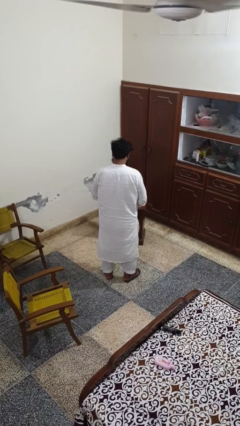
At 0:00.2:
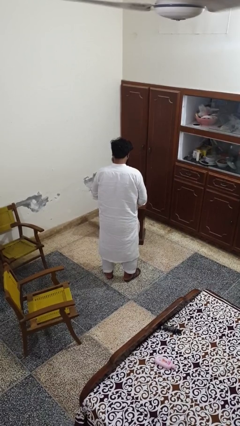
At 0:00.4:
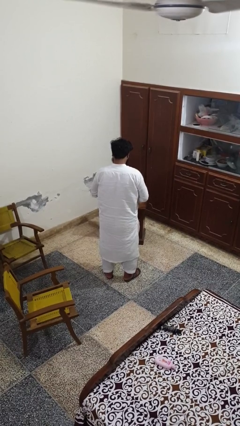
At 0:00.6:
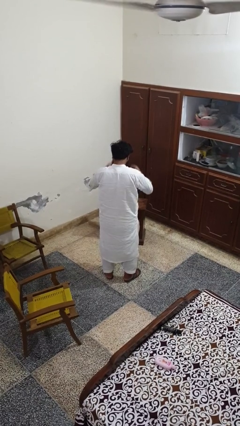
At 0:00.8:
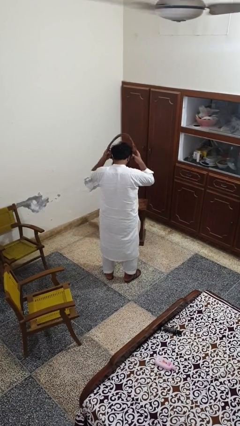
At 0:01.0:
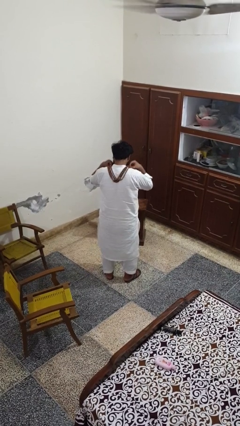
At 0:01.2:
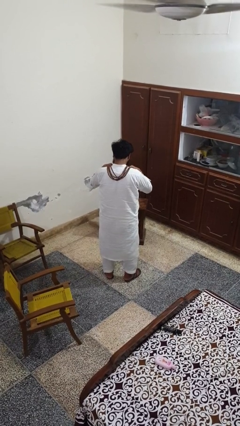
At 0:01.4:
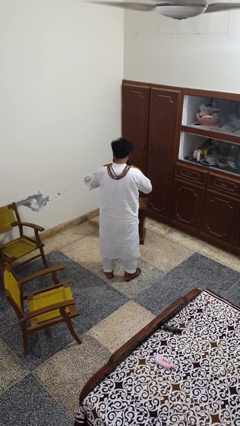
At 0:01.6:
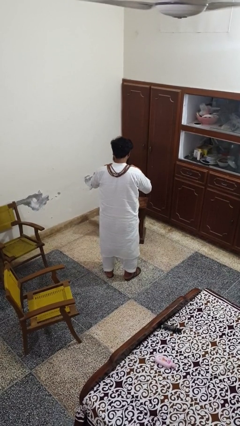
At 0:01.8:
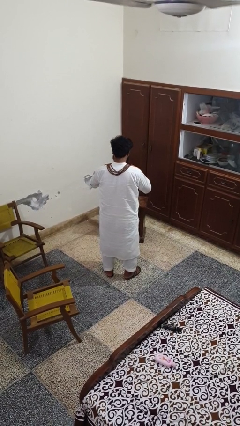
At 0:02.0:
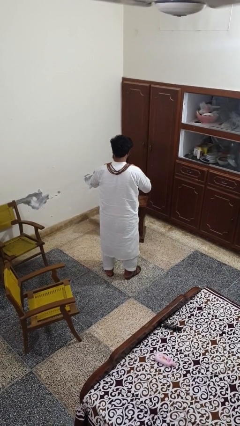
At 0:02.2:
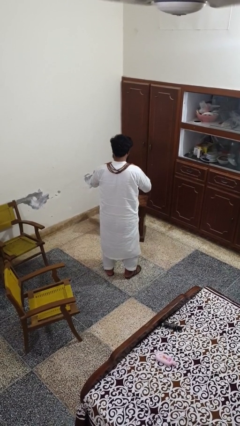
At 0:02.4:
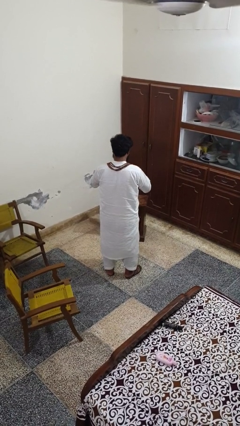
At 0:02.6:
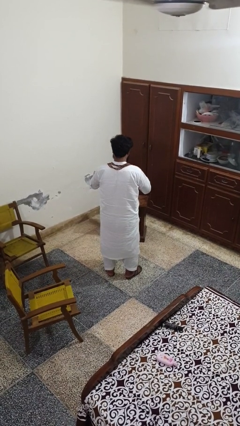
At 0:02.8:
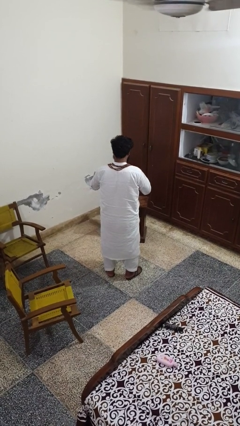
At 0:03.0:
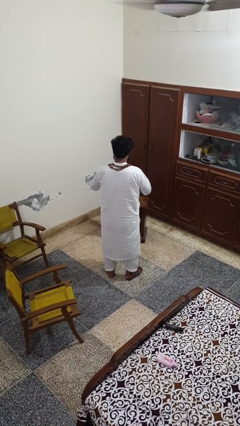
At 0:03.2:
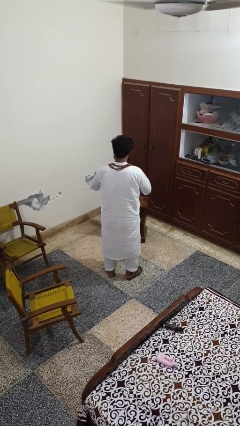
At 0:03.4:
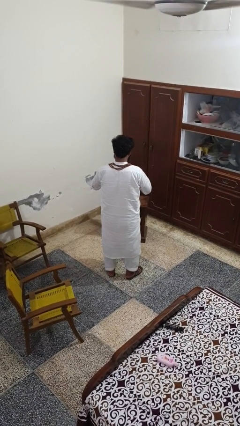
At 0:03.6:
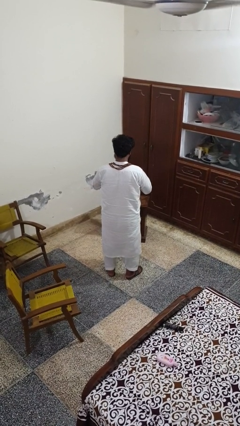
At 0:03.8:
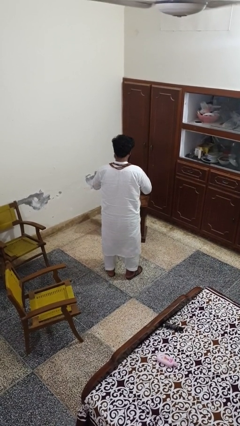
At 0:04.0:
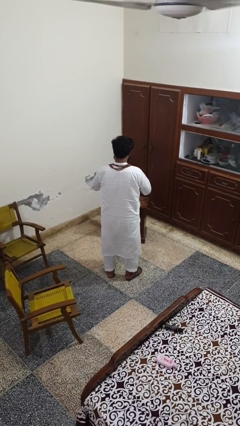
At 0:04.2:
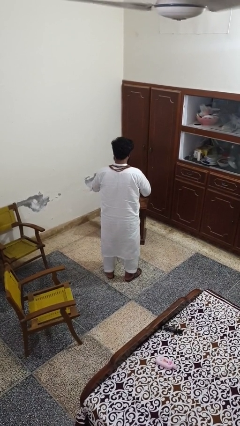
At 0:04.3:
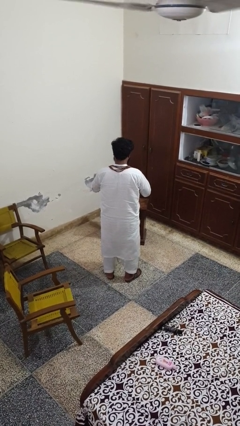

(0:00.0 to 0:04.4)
person puts on necklace

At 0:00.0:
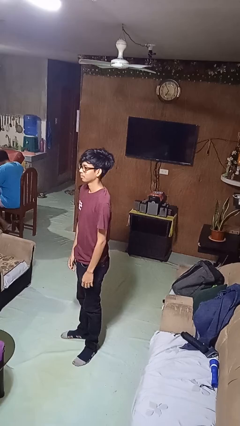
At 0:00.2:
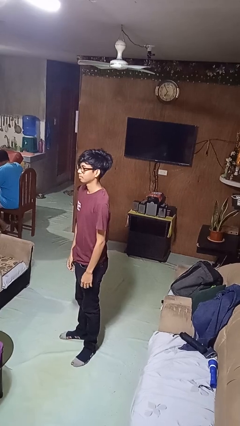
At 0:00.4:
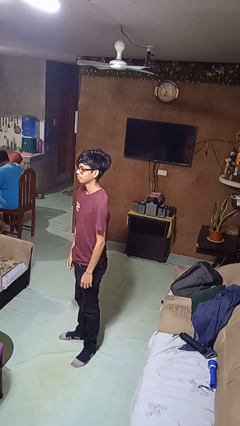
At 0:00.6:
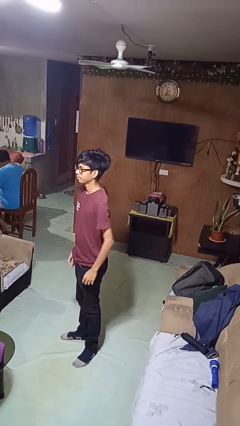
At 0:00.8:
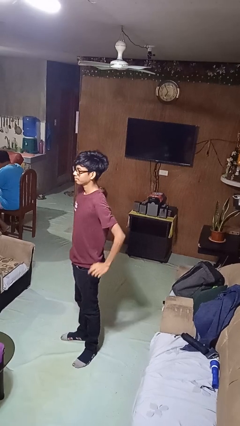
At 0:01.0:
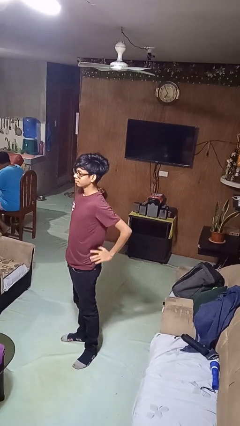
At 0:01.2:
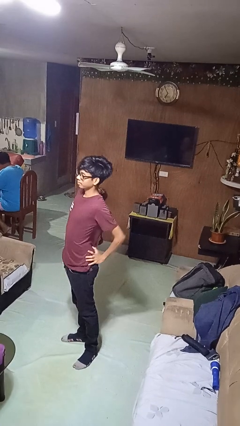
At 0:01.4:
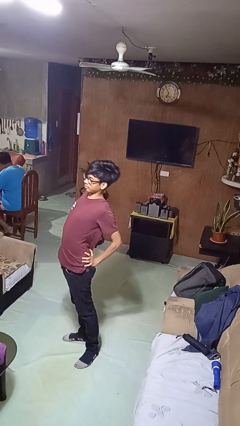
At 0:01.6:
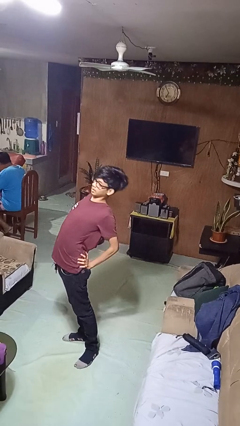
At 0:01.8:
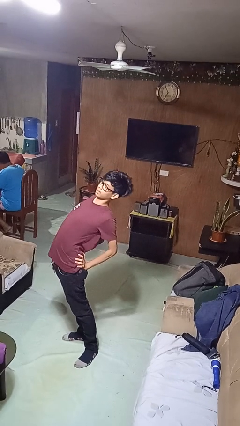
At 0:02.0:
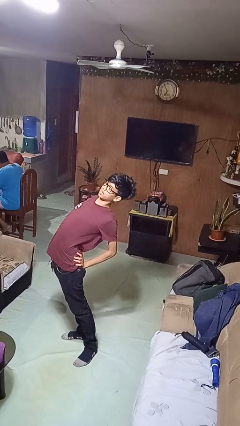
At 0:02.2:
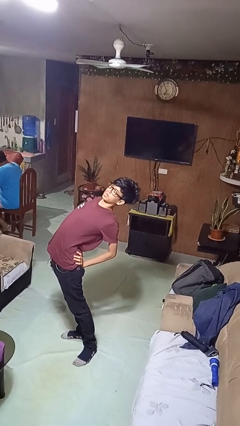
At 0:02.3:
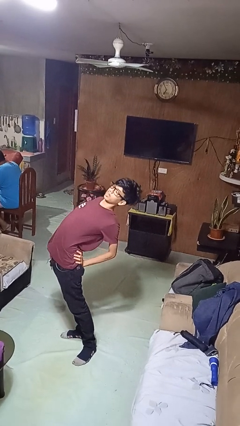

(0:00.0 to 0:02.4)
person stretches back

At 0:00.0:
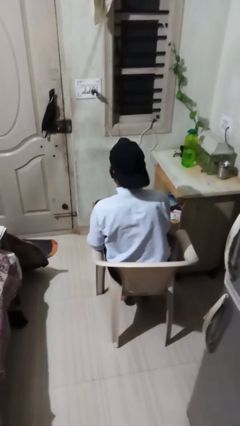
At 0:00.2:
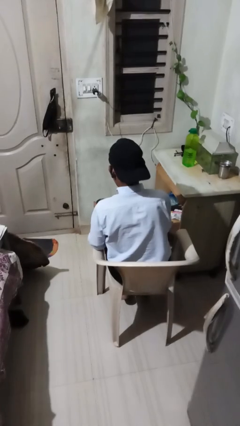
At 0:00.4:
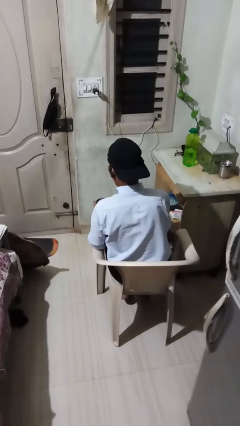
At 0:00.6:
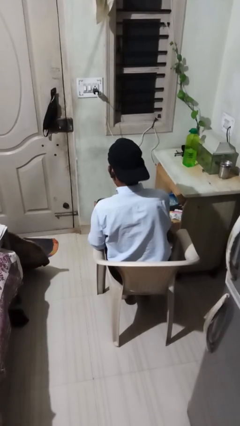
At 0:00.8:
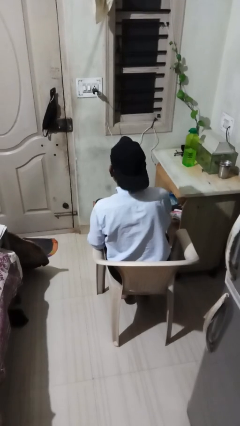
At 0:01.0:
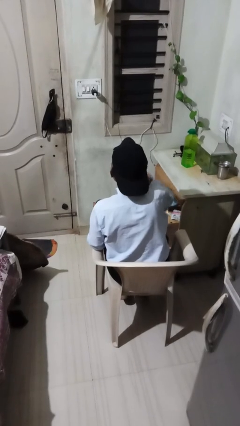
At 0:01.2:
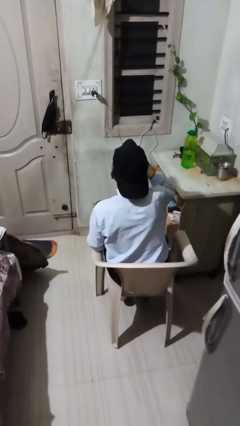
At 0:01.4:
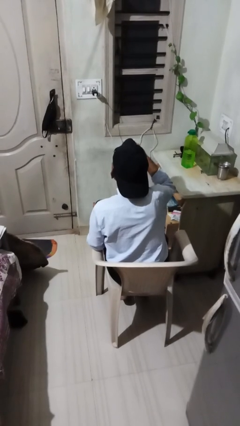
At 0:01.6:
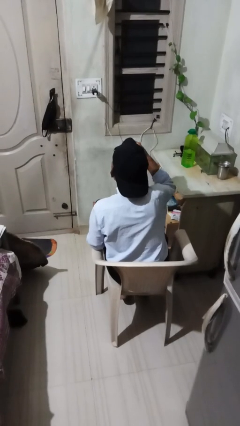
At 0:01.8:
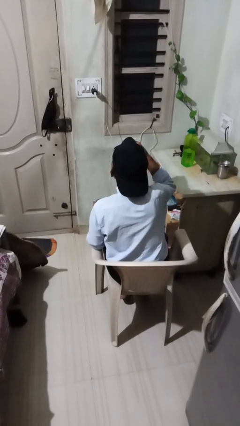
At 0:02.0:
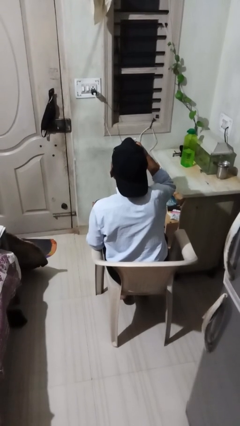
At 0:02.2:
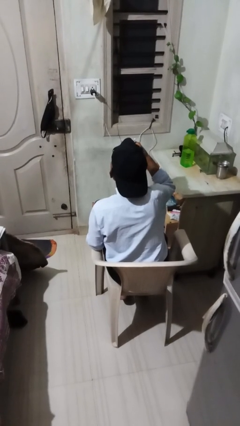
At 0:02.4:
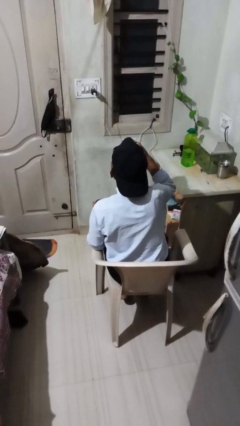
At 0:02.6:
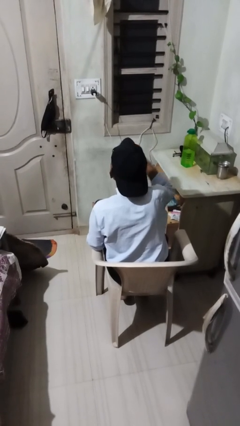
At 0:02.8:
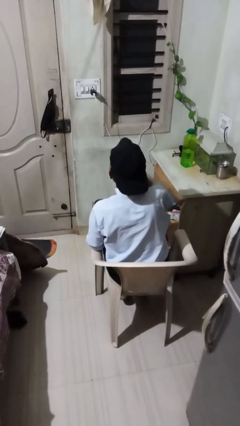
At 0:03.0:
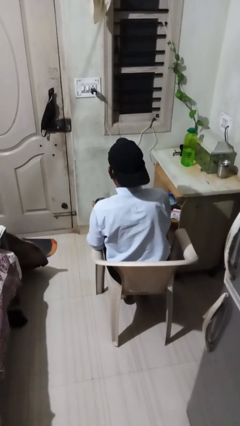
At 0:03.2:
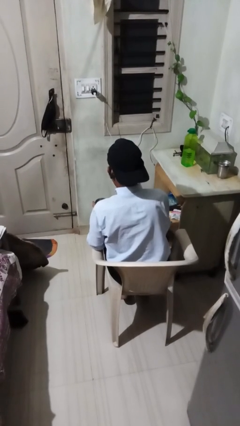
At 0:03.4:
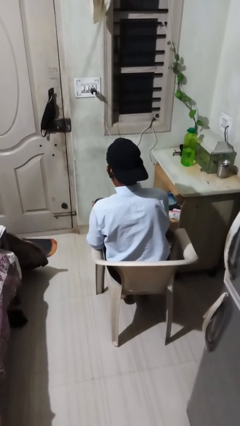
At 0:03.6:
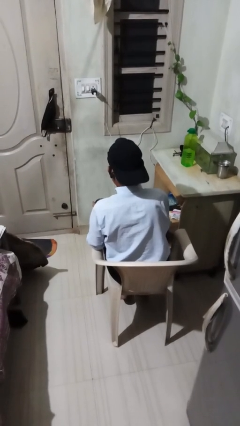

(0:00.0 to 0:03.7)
person eats with utensil

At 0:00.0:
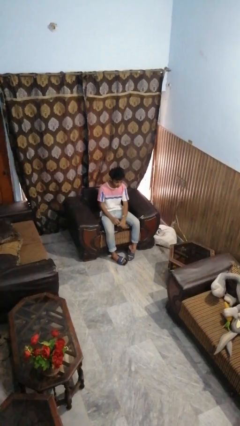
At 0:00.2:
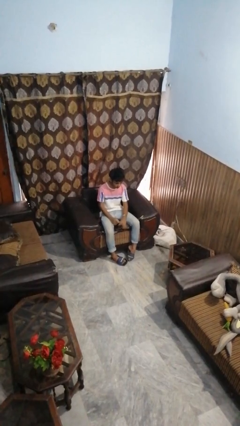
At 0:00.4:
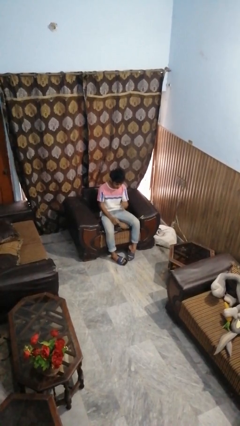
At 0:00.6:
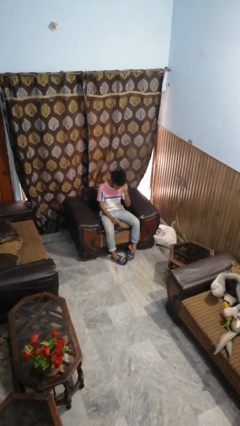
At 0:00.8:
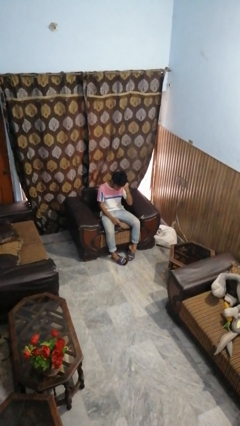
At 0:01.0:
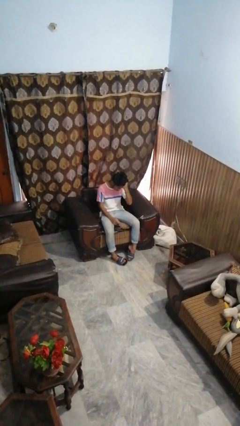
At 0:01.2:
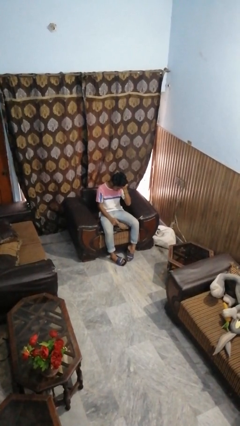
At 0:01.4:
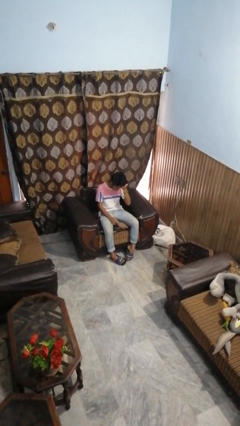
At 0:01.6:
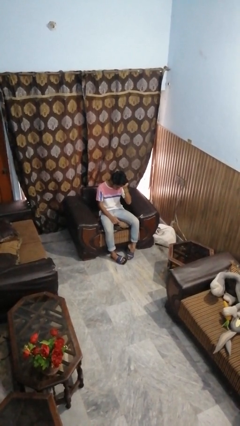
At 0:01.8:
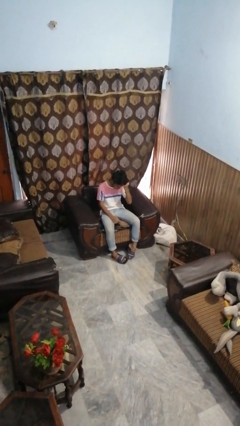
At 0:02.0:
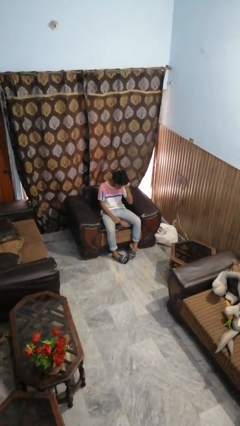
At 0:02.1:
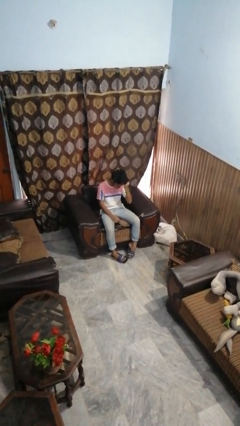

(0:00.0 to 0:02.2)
person strokes hair

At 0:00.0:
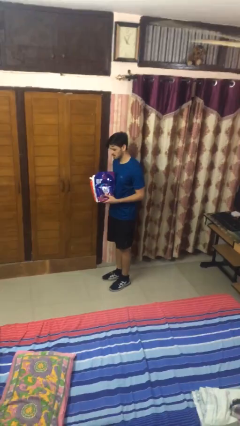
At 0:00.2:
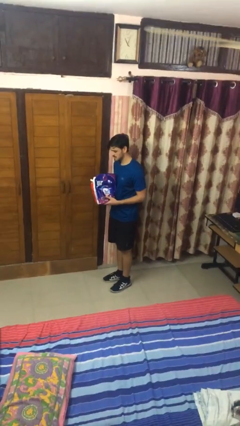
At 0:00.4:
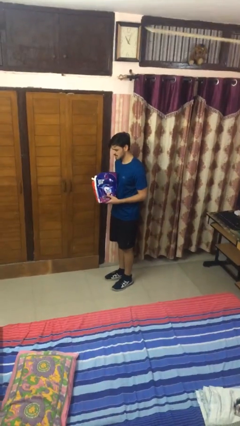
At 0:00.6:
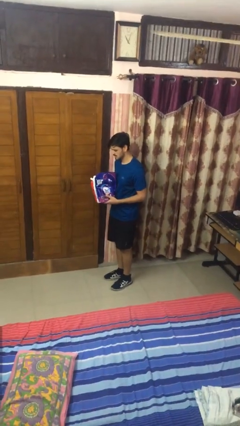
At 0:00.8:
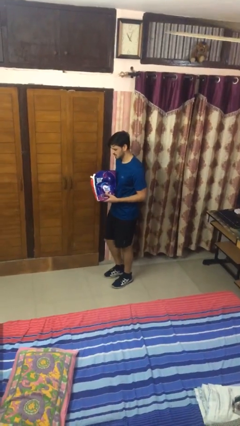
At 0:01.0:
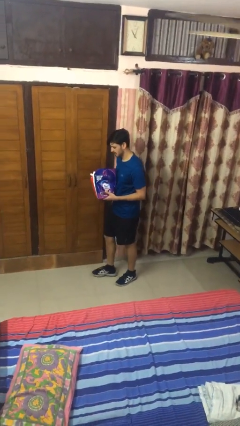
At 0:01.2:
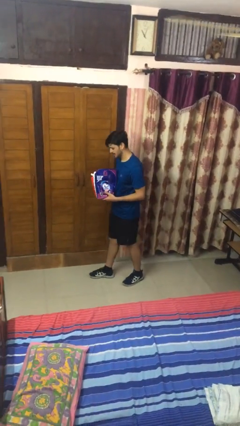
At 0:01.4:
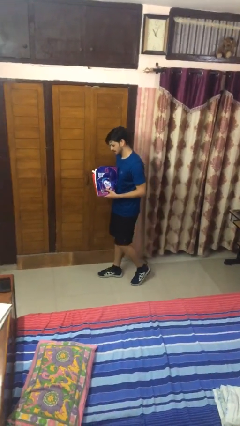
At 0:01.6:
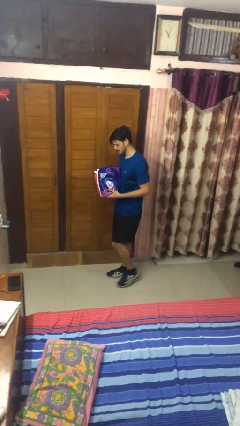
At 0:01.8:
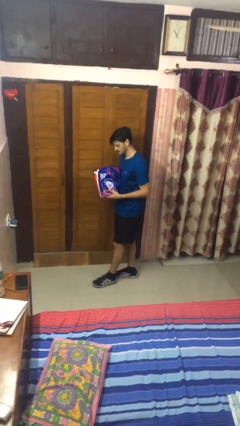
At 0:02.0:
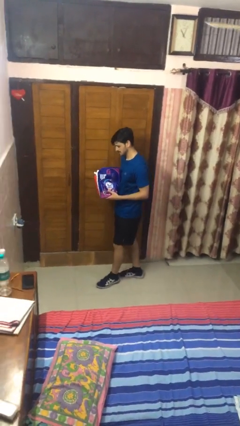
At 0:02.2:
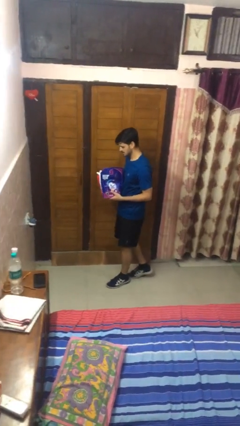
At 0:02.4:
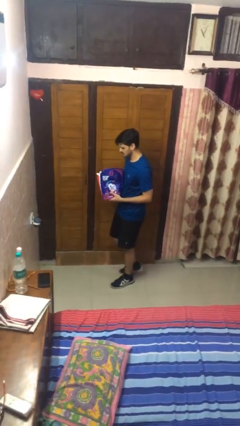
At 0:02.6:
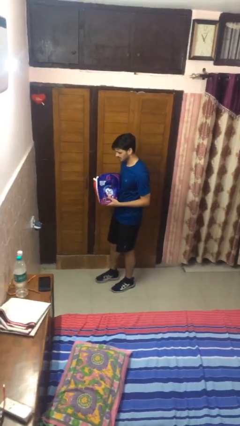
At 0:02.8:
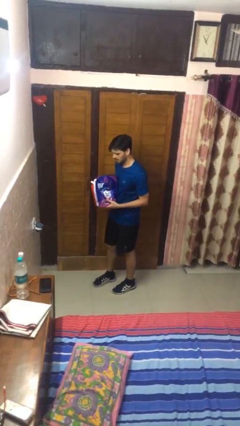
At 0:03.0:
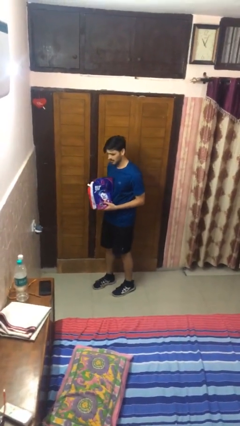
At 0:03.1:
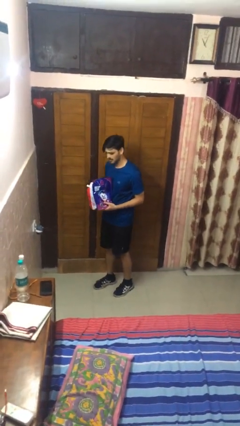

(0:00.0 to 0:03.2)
person carries groceries

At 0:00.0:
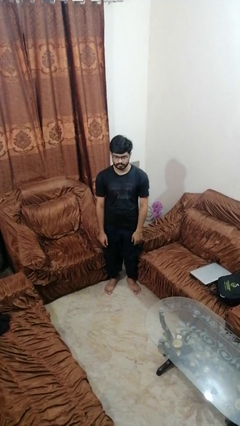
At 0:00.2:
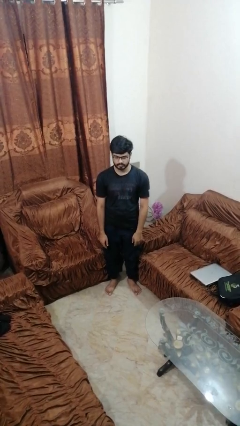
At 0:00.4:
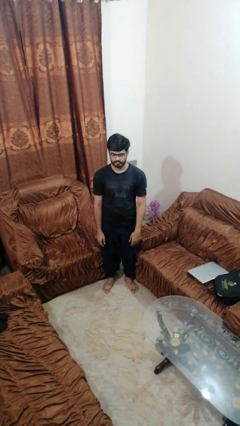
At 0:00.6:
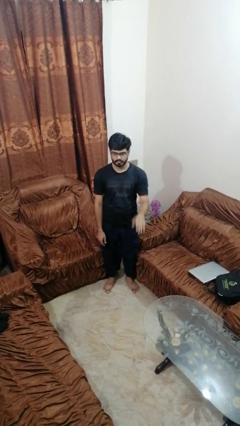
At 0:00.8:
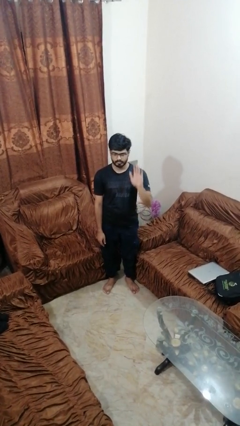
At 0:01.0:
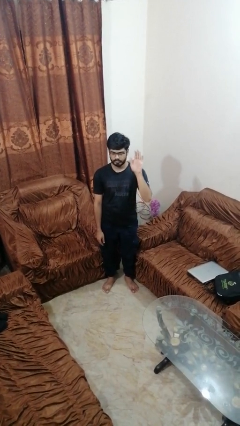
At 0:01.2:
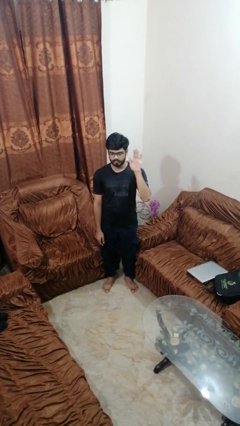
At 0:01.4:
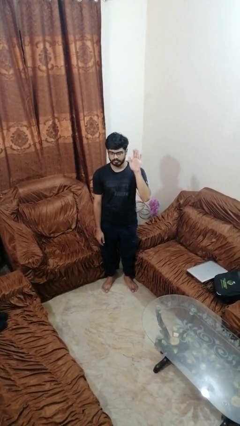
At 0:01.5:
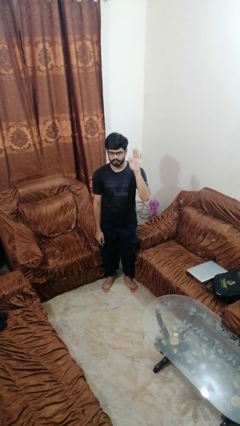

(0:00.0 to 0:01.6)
person gestures raise hand
